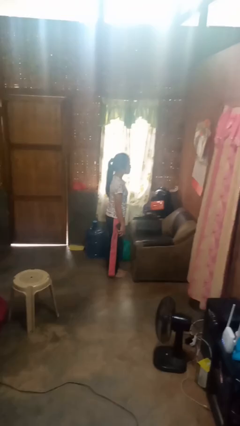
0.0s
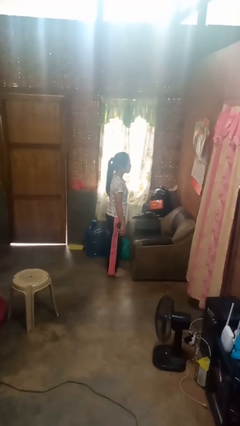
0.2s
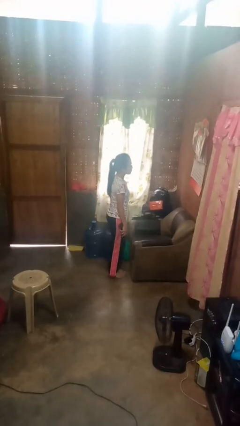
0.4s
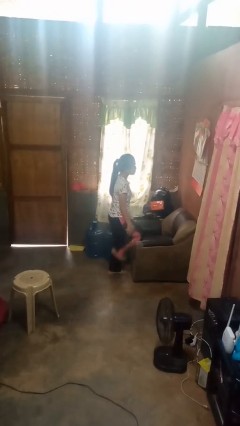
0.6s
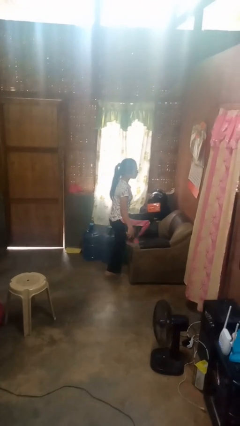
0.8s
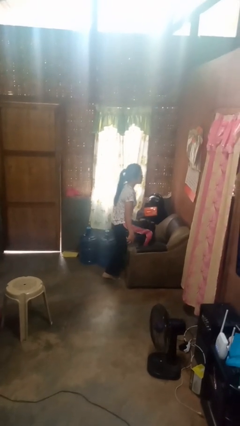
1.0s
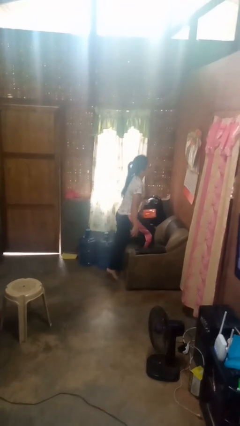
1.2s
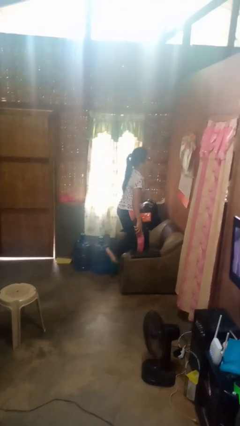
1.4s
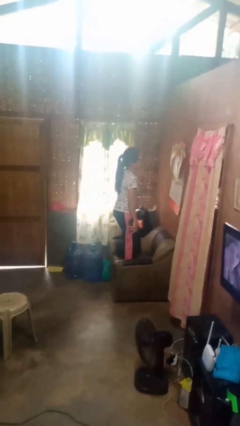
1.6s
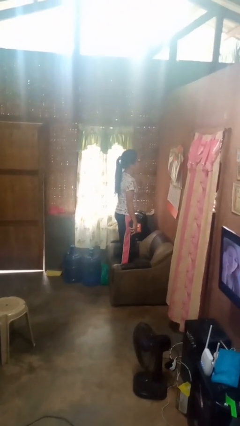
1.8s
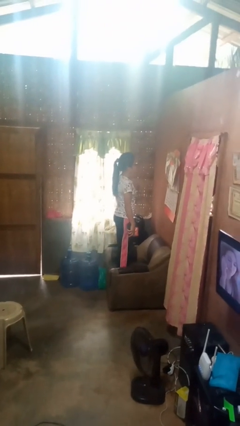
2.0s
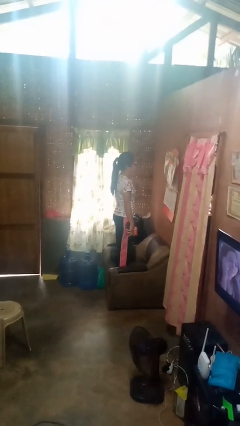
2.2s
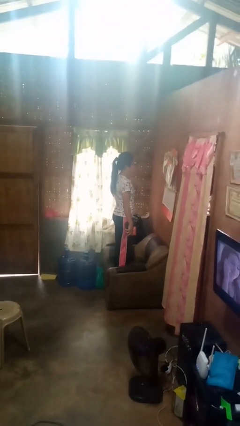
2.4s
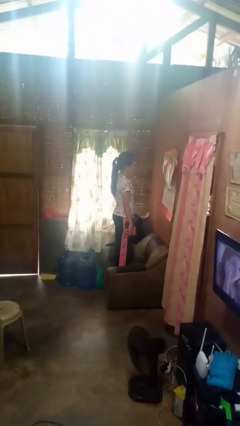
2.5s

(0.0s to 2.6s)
person climbs on couch

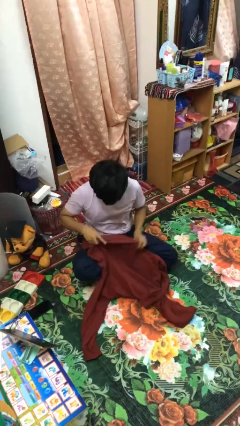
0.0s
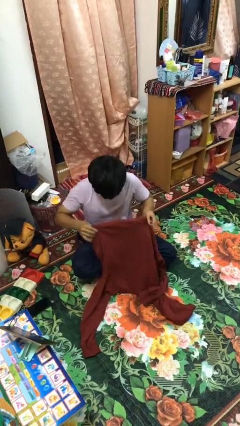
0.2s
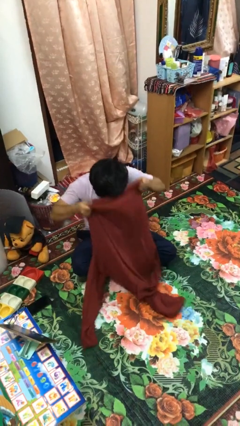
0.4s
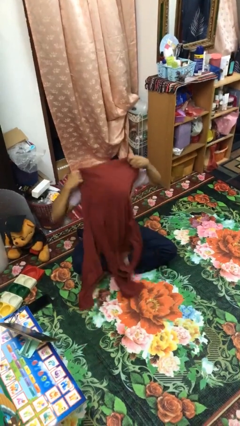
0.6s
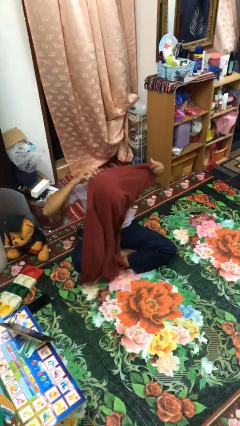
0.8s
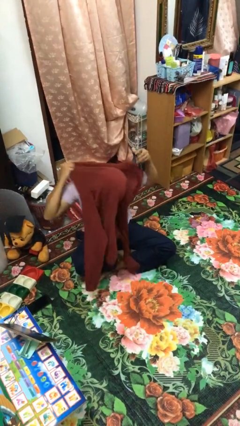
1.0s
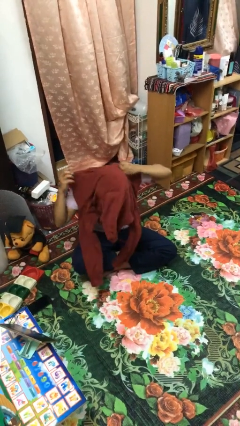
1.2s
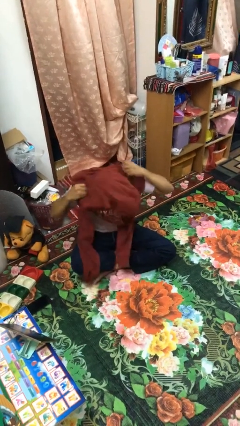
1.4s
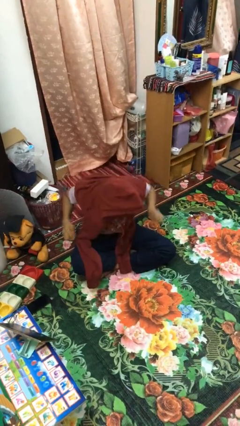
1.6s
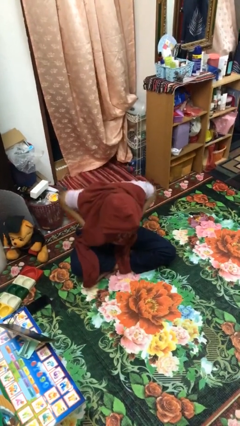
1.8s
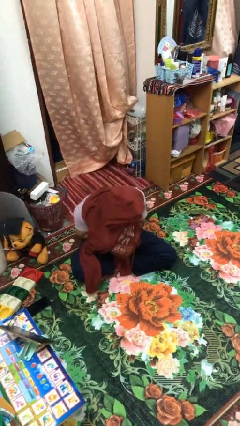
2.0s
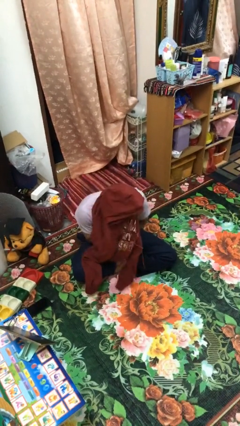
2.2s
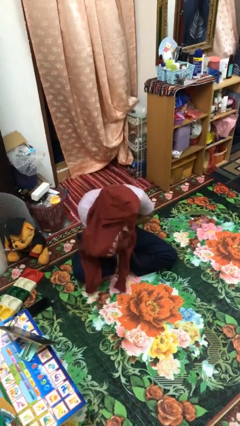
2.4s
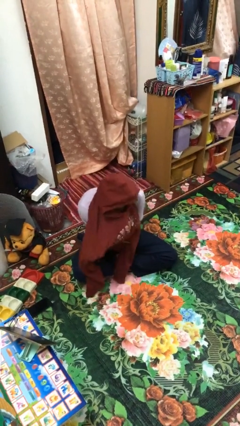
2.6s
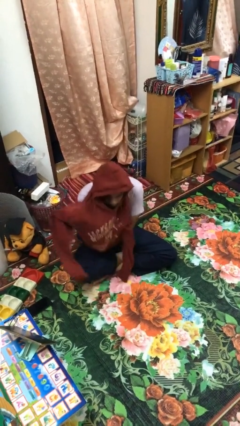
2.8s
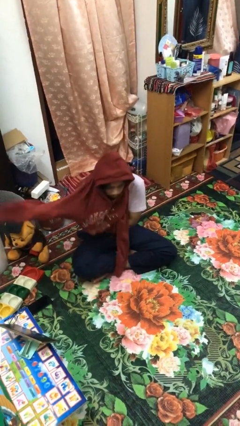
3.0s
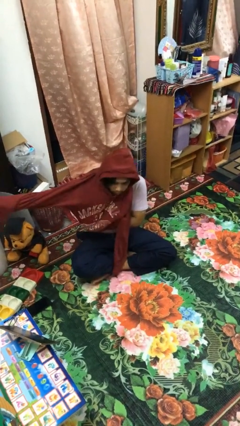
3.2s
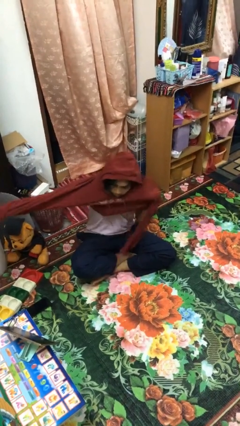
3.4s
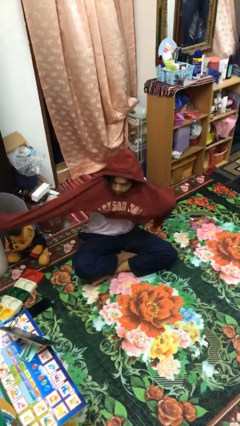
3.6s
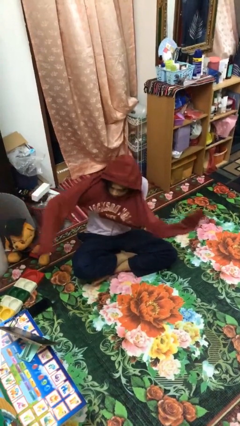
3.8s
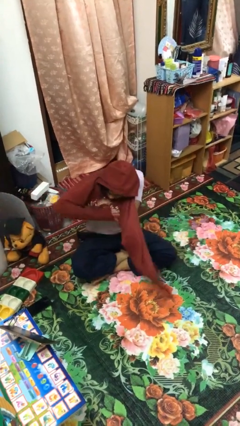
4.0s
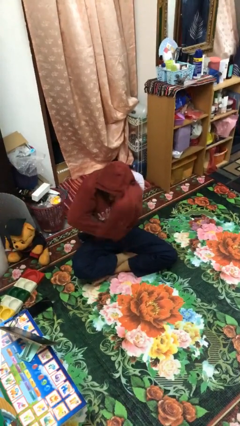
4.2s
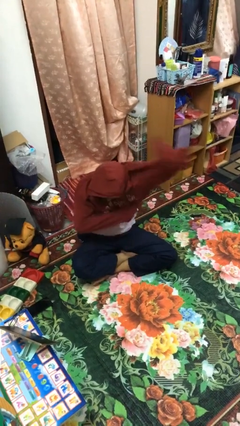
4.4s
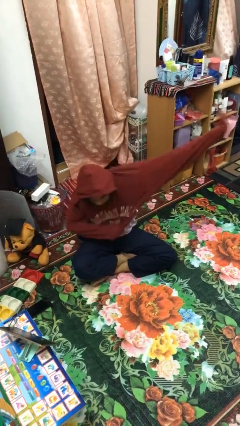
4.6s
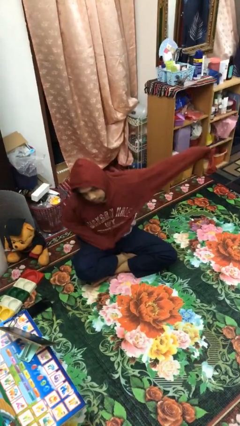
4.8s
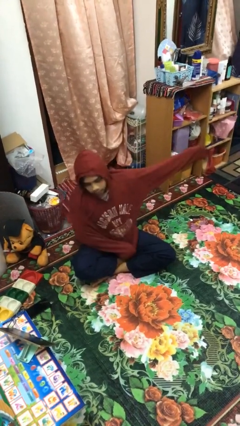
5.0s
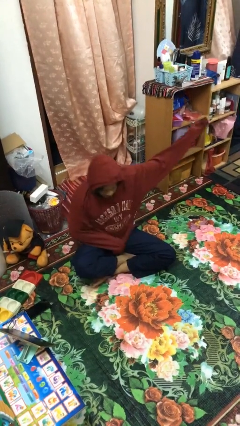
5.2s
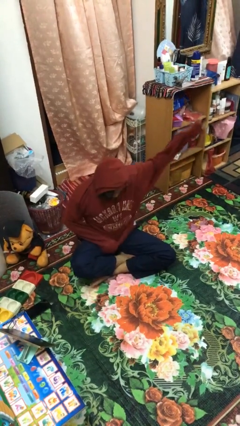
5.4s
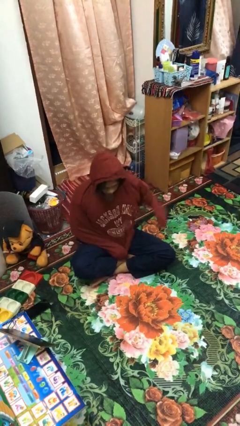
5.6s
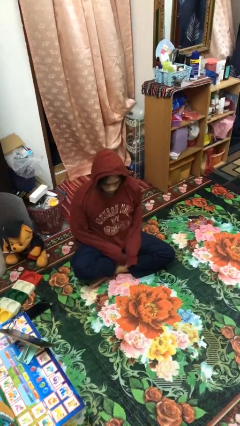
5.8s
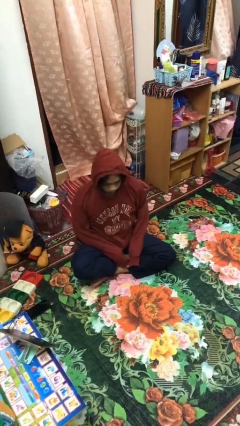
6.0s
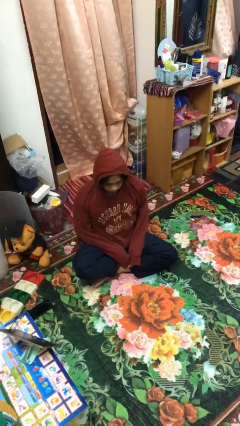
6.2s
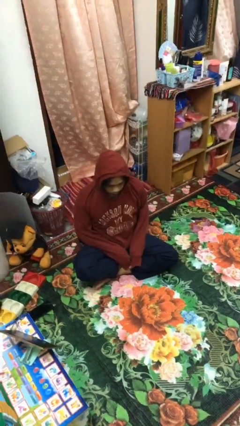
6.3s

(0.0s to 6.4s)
person puts on hoodie

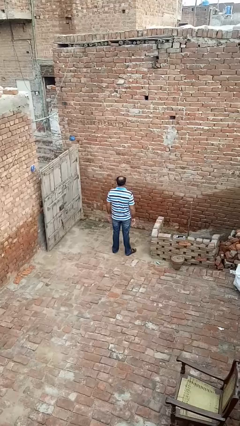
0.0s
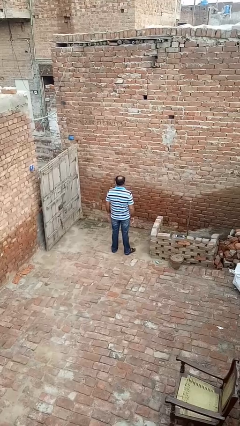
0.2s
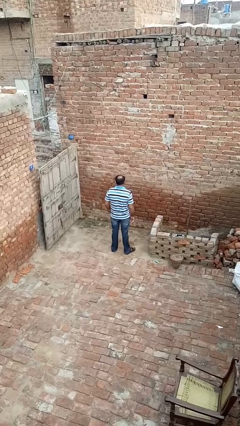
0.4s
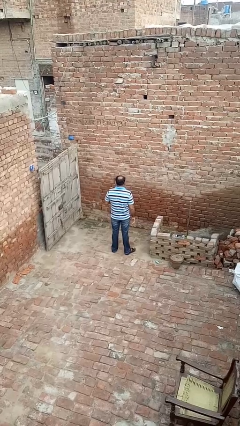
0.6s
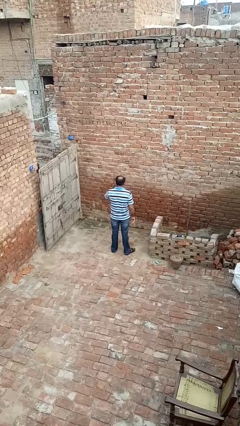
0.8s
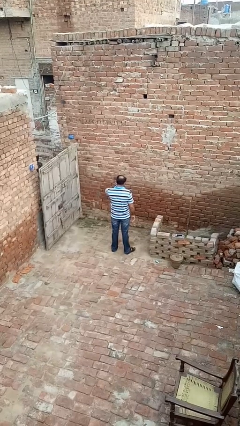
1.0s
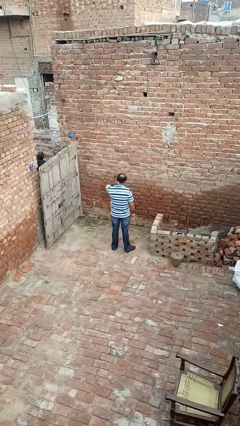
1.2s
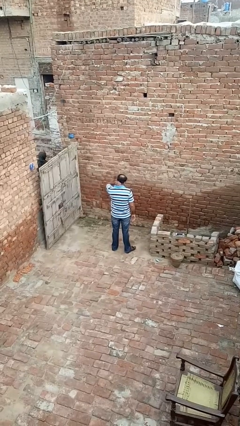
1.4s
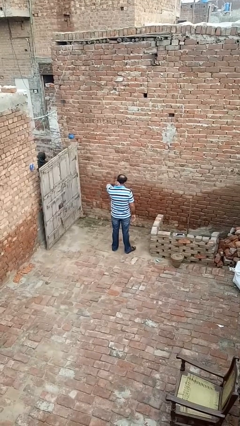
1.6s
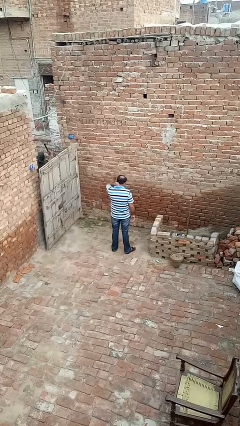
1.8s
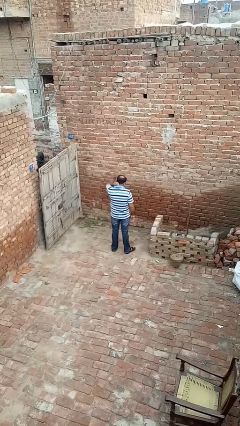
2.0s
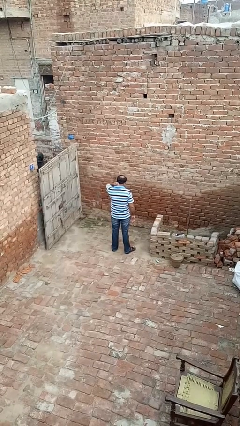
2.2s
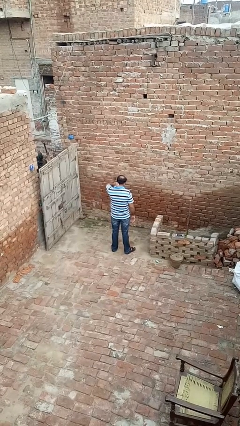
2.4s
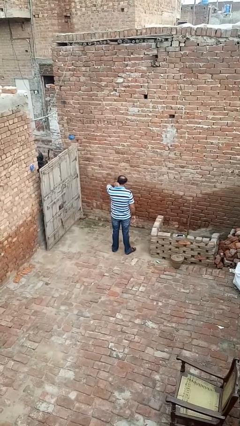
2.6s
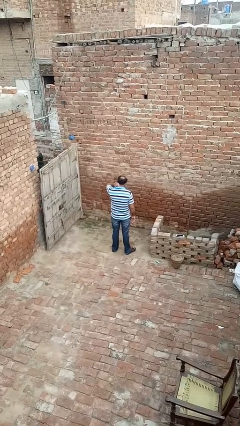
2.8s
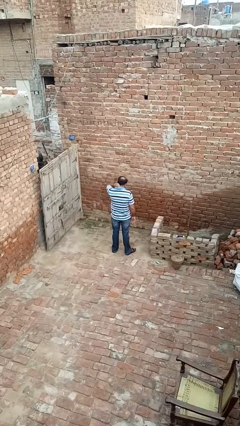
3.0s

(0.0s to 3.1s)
person rubs neck

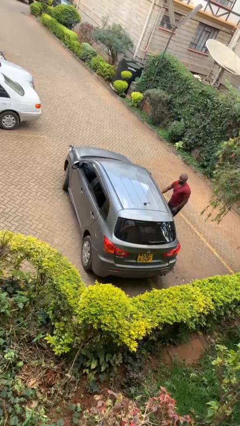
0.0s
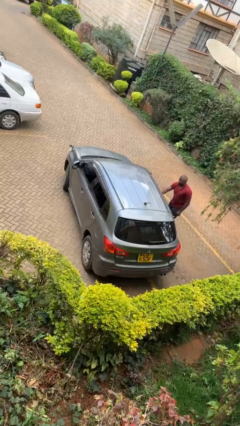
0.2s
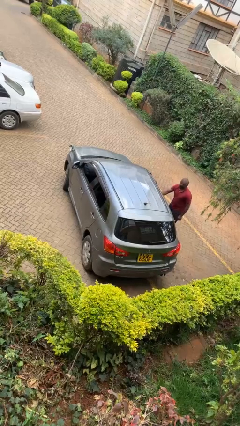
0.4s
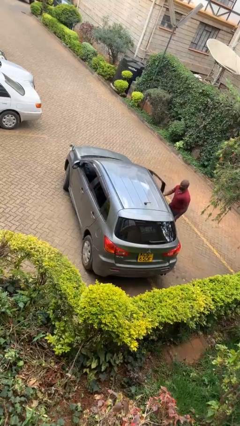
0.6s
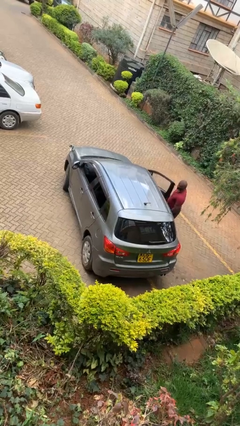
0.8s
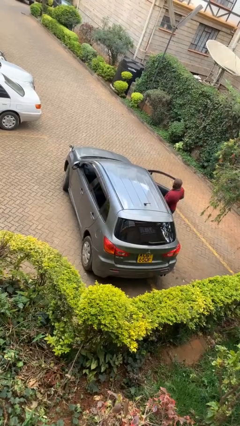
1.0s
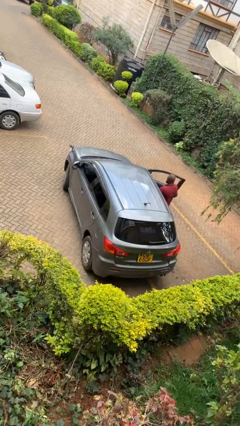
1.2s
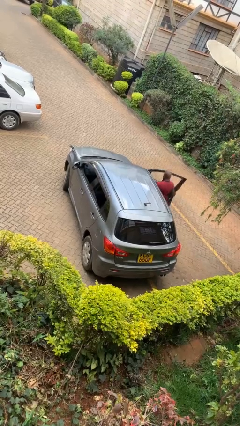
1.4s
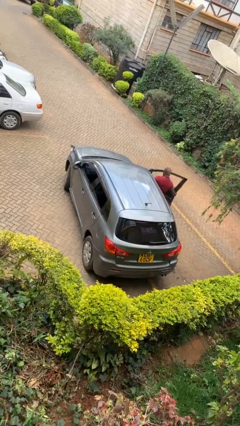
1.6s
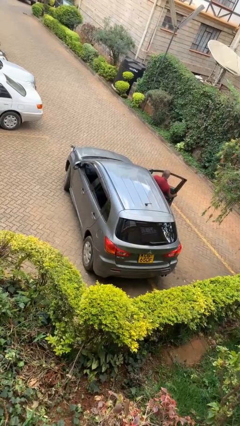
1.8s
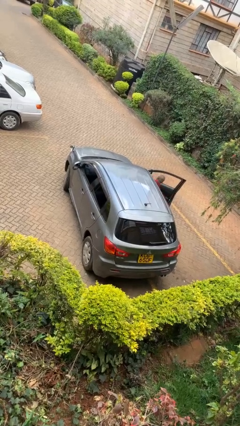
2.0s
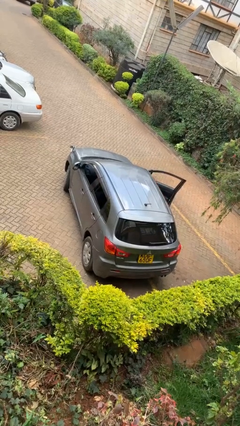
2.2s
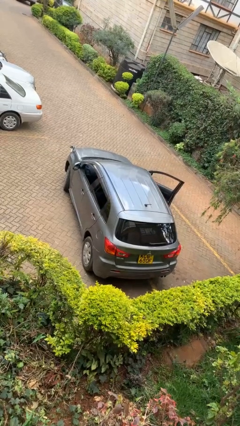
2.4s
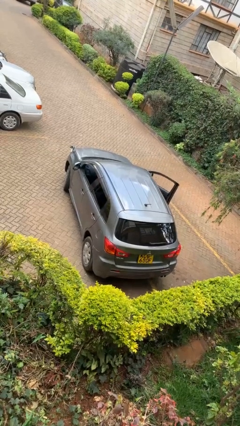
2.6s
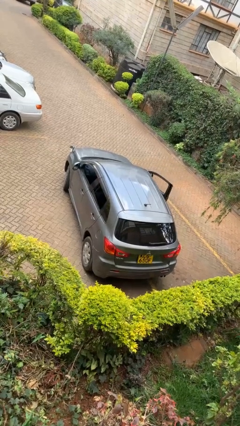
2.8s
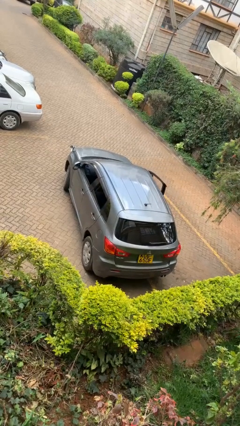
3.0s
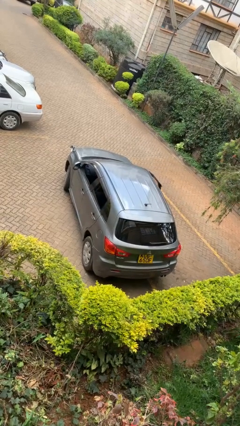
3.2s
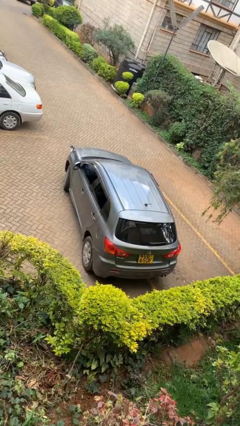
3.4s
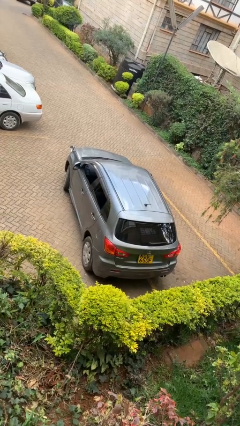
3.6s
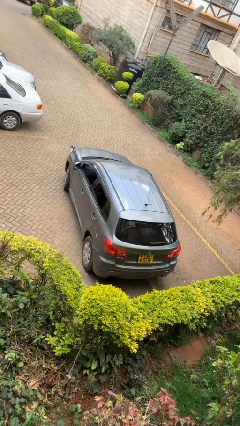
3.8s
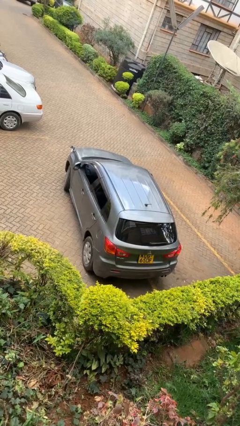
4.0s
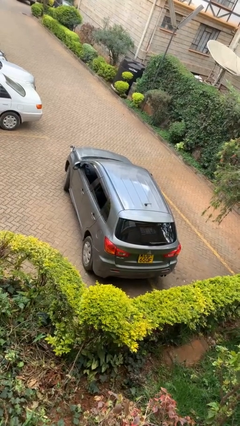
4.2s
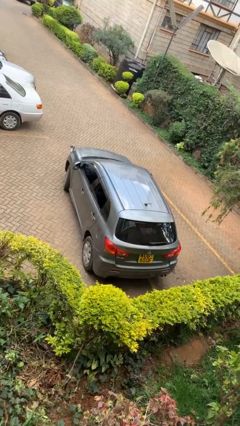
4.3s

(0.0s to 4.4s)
car picks up person

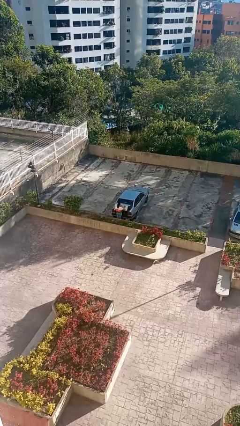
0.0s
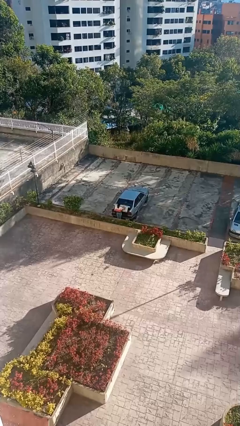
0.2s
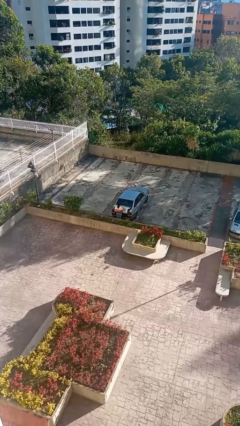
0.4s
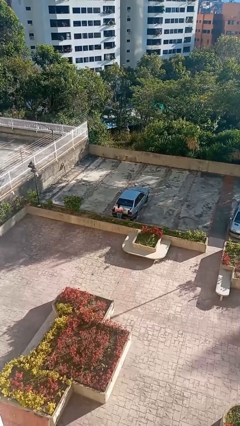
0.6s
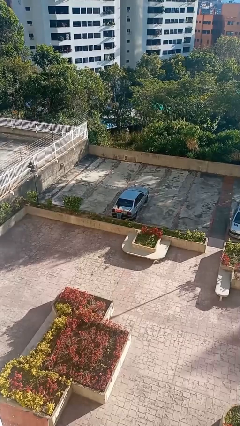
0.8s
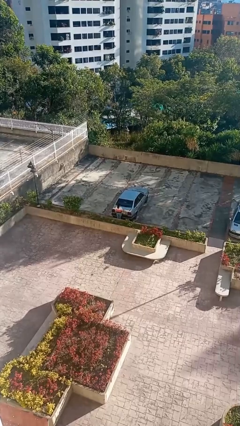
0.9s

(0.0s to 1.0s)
person closes car trunk
